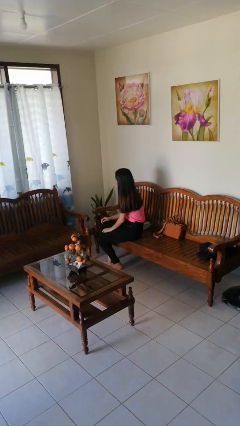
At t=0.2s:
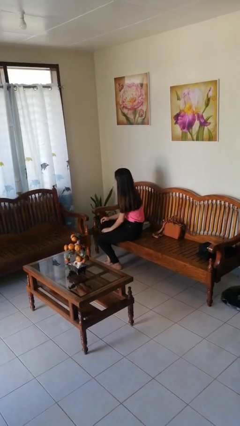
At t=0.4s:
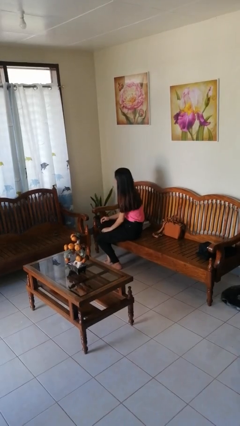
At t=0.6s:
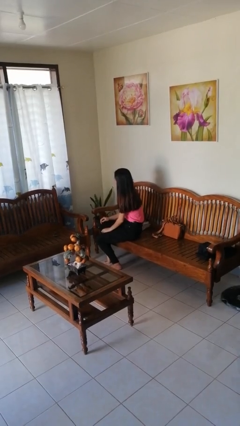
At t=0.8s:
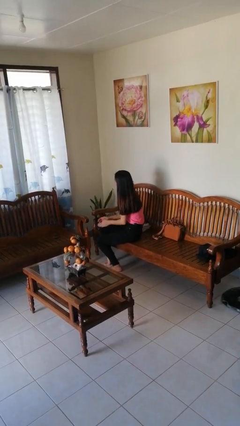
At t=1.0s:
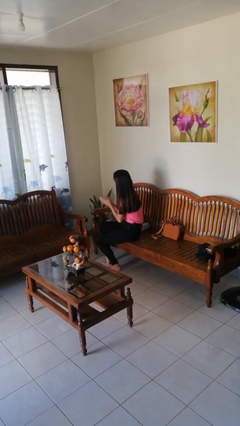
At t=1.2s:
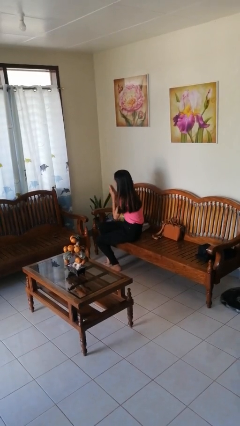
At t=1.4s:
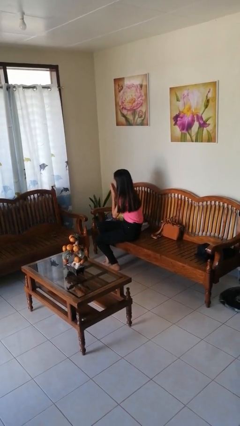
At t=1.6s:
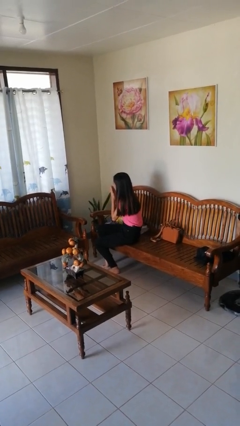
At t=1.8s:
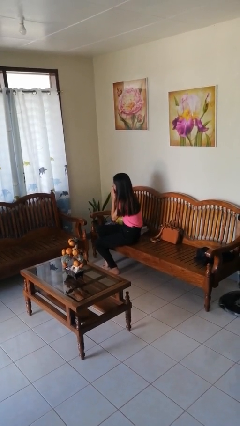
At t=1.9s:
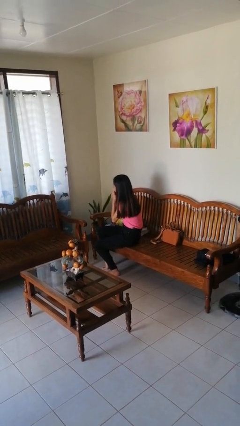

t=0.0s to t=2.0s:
person blows into hands

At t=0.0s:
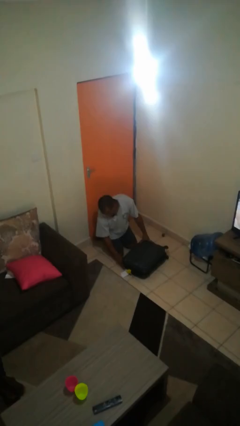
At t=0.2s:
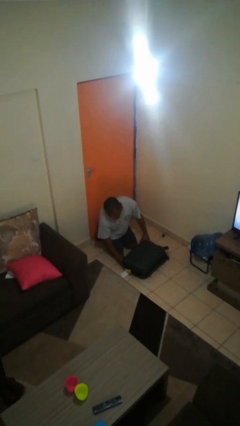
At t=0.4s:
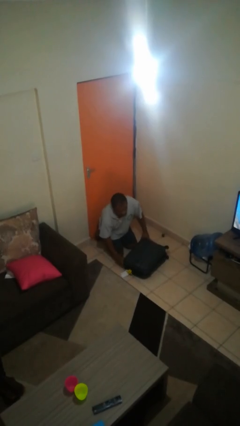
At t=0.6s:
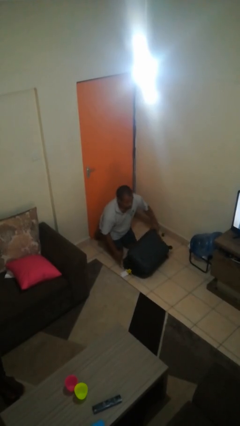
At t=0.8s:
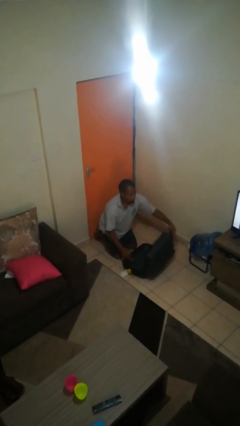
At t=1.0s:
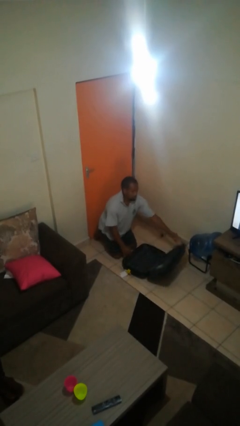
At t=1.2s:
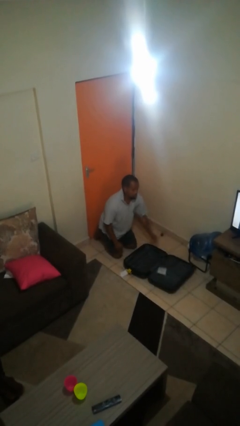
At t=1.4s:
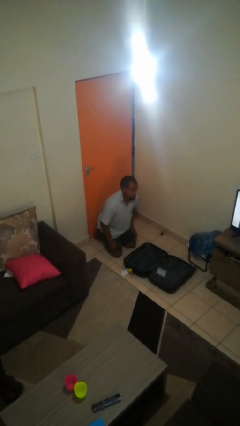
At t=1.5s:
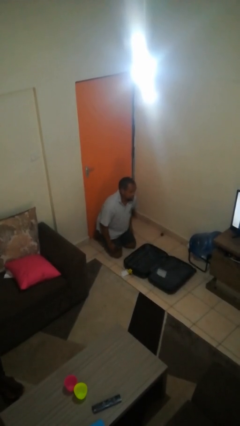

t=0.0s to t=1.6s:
person opens suitcase

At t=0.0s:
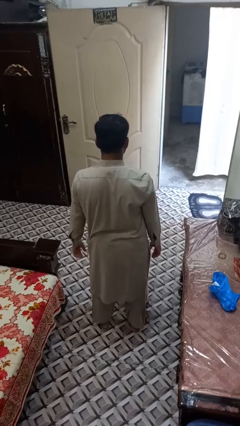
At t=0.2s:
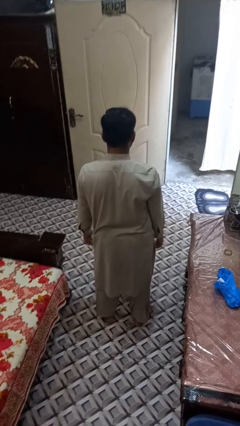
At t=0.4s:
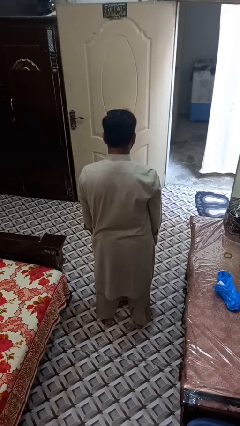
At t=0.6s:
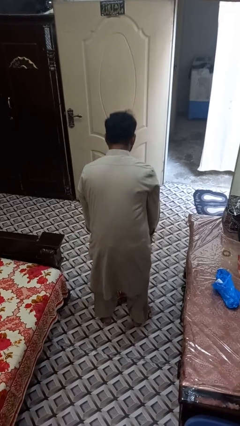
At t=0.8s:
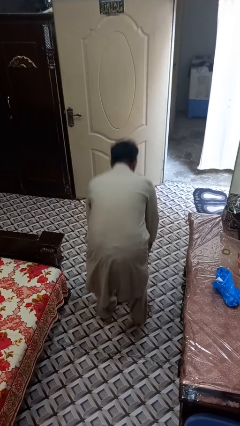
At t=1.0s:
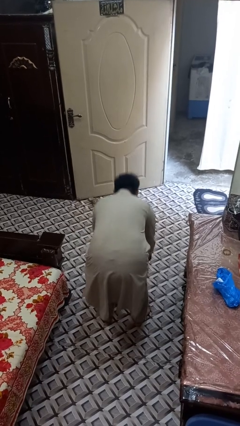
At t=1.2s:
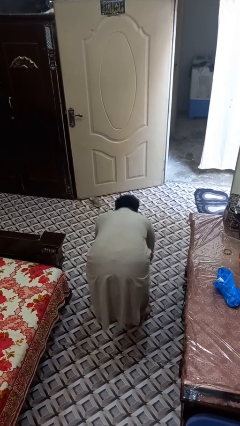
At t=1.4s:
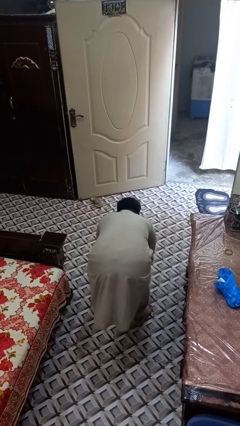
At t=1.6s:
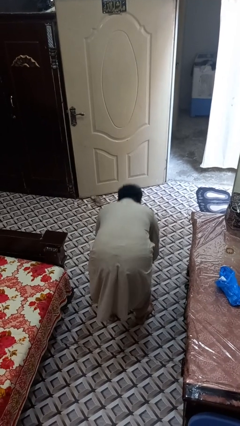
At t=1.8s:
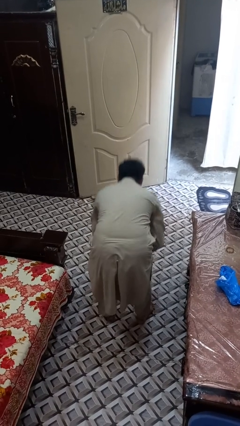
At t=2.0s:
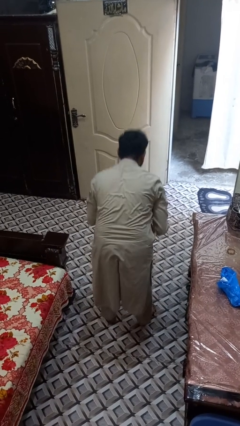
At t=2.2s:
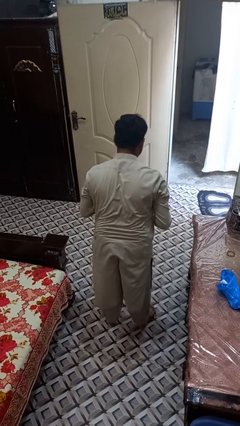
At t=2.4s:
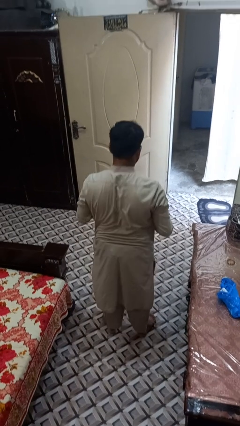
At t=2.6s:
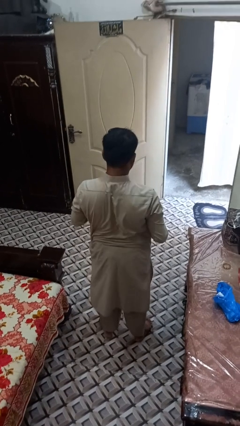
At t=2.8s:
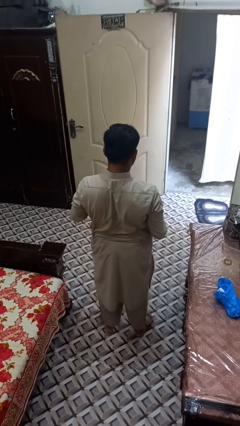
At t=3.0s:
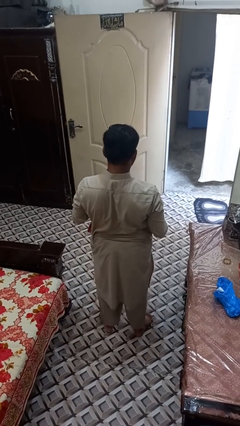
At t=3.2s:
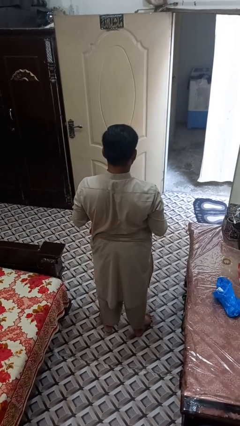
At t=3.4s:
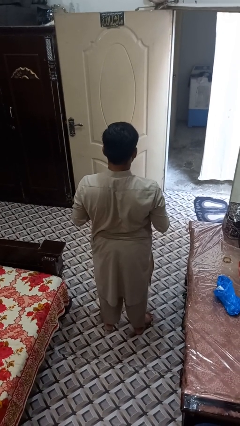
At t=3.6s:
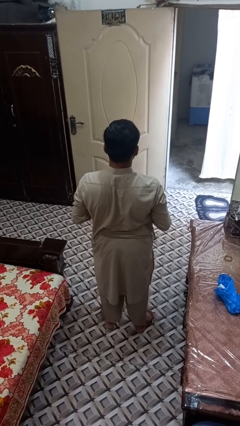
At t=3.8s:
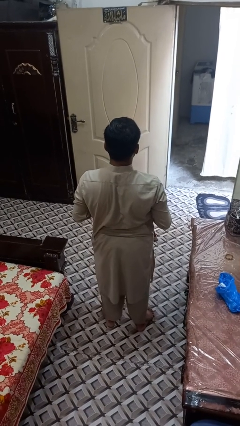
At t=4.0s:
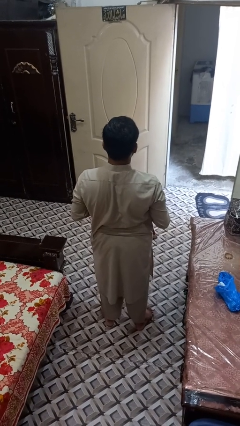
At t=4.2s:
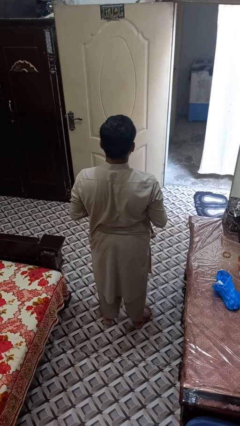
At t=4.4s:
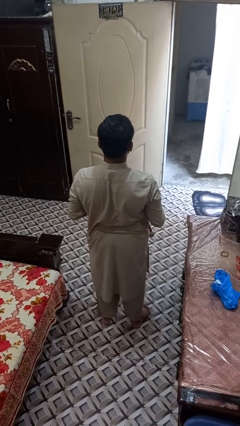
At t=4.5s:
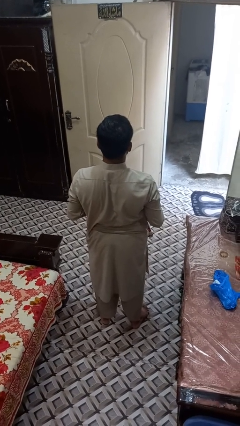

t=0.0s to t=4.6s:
person picks up object from floor

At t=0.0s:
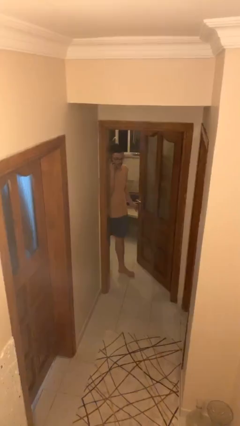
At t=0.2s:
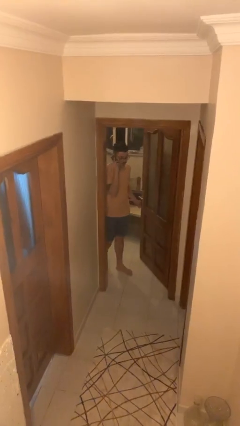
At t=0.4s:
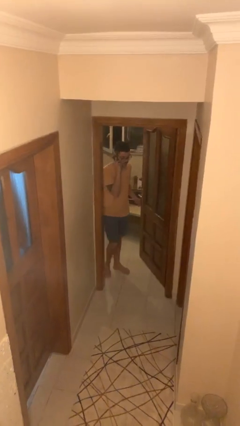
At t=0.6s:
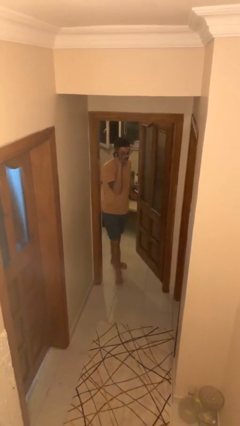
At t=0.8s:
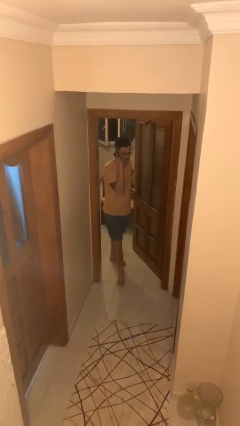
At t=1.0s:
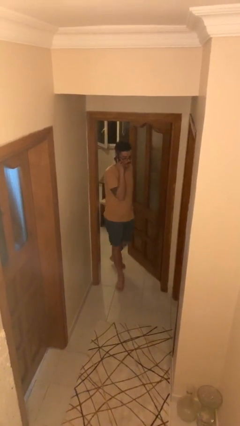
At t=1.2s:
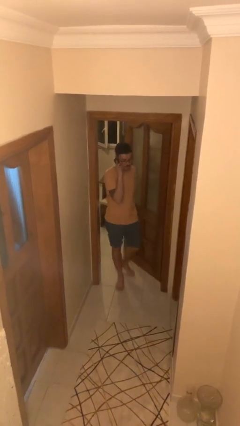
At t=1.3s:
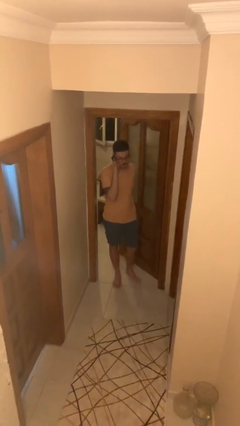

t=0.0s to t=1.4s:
person enters scene through structure

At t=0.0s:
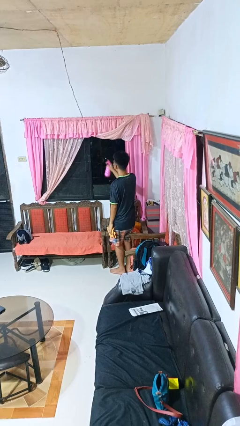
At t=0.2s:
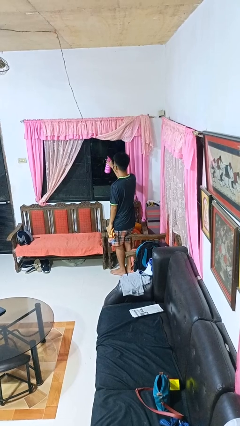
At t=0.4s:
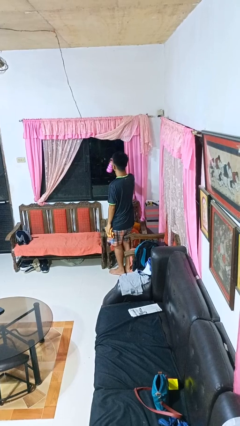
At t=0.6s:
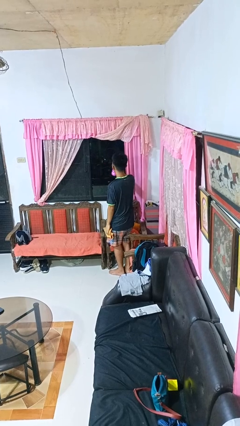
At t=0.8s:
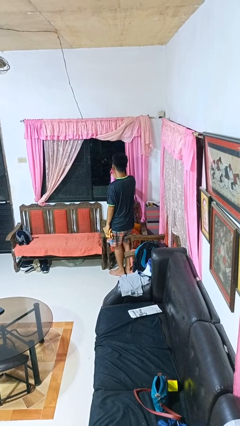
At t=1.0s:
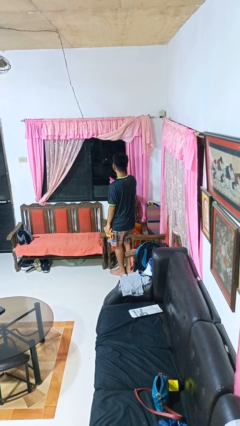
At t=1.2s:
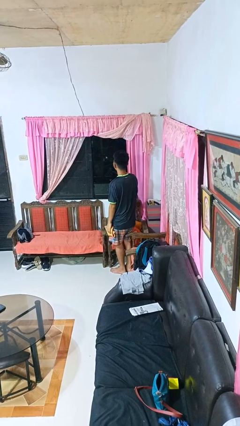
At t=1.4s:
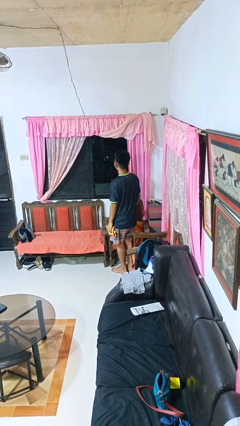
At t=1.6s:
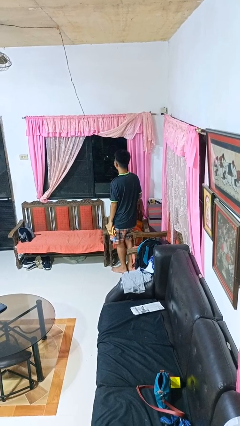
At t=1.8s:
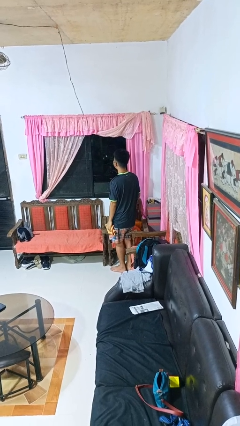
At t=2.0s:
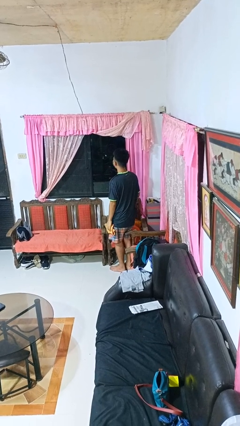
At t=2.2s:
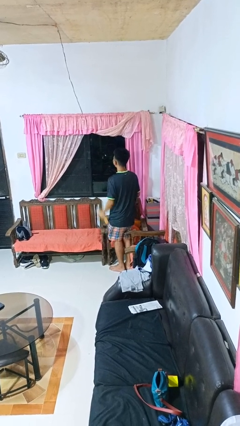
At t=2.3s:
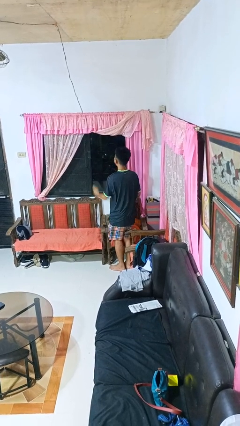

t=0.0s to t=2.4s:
person sprays from bottle

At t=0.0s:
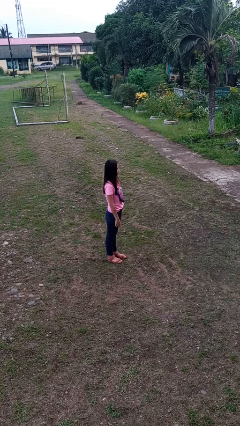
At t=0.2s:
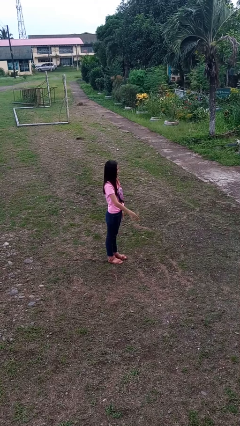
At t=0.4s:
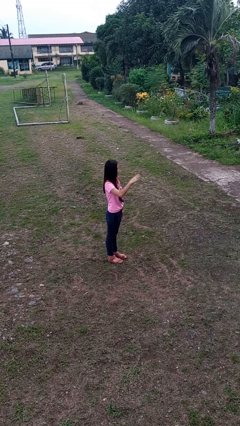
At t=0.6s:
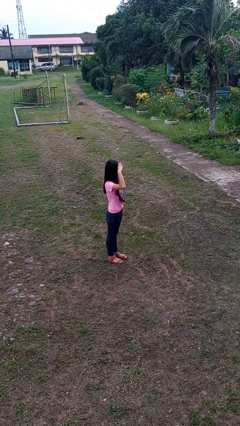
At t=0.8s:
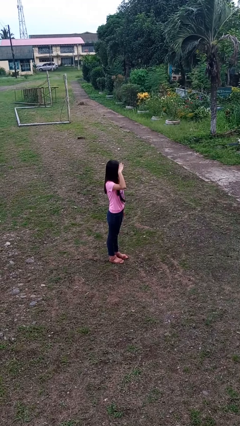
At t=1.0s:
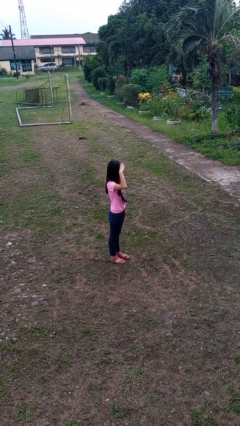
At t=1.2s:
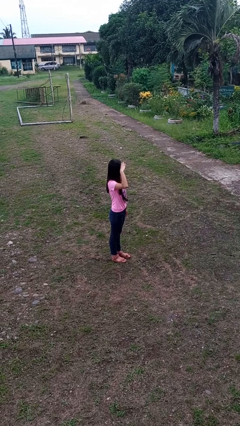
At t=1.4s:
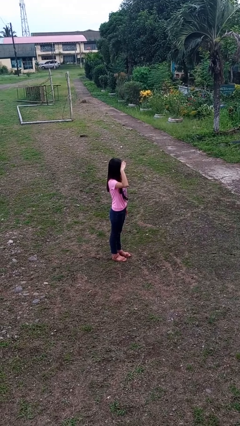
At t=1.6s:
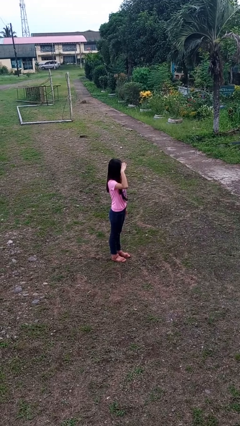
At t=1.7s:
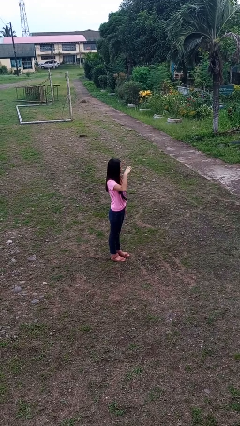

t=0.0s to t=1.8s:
person salutes

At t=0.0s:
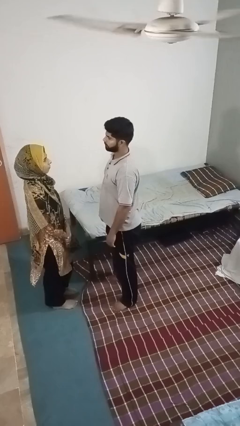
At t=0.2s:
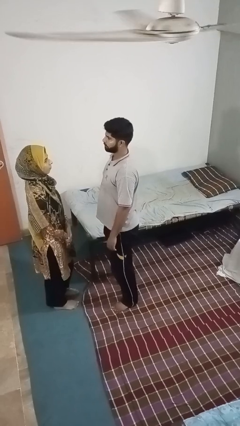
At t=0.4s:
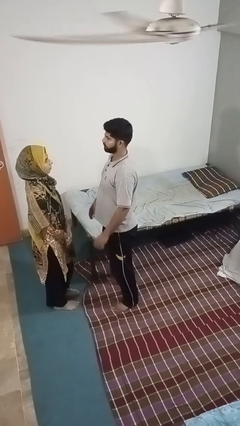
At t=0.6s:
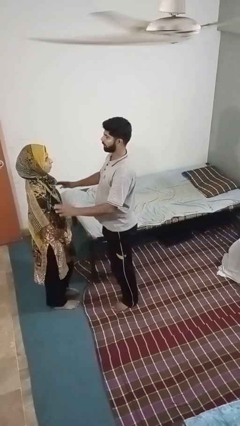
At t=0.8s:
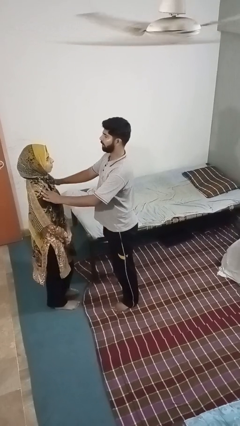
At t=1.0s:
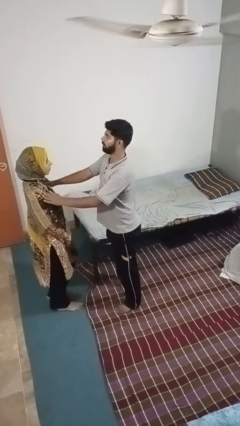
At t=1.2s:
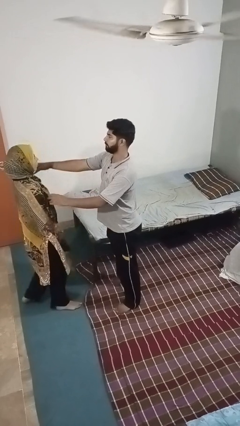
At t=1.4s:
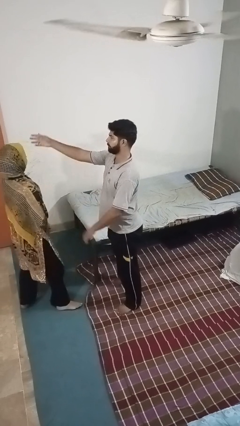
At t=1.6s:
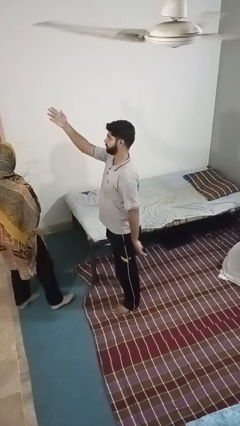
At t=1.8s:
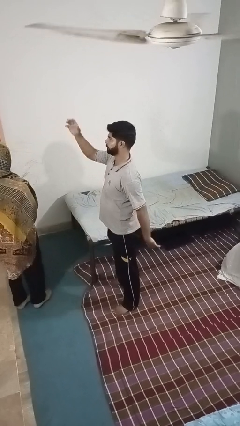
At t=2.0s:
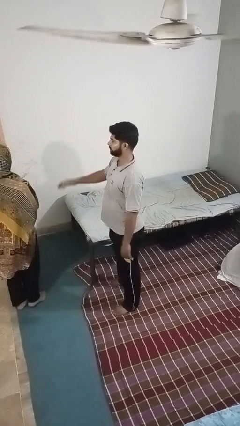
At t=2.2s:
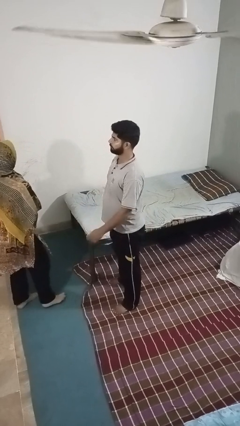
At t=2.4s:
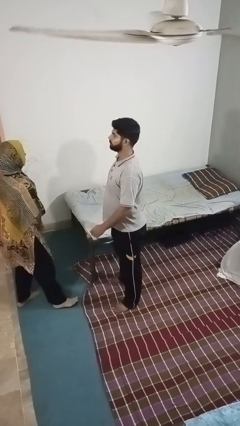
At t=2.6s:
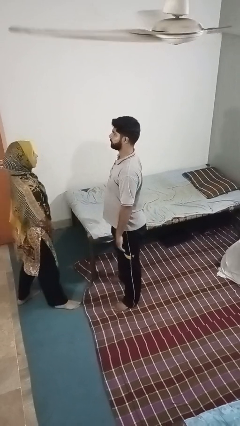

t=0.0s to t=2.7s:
person shoves person

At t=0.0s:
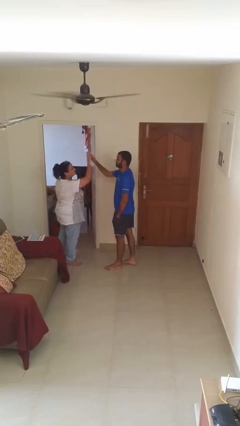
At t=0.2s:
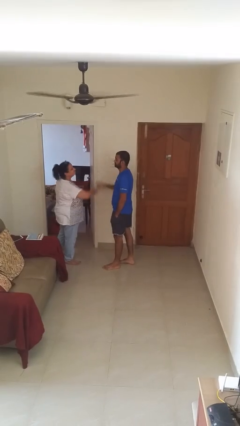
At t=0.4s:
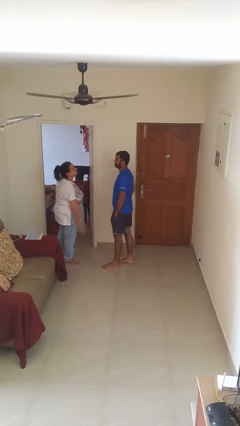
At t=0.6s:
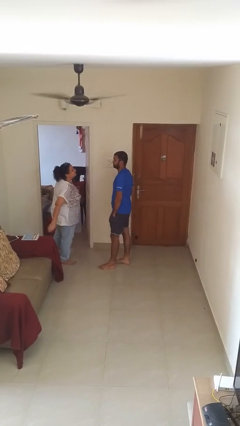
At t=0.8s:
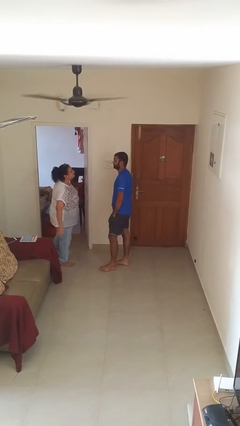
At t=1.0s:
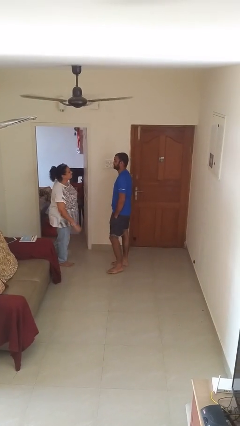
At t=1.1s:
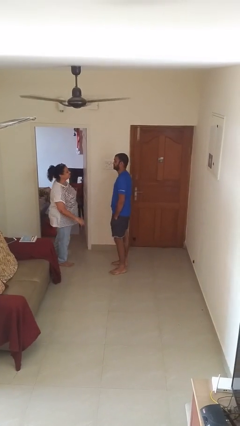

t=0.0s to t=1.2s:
person highfives hand
